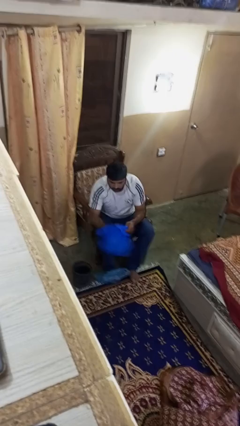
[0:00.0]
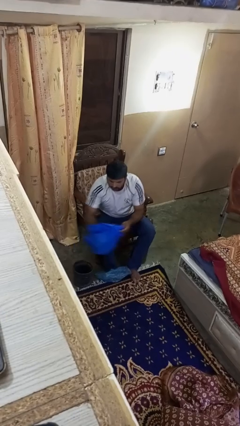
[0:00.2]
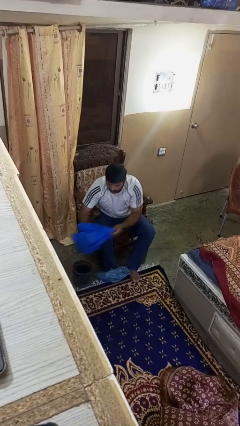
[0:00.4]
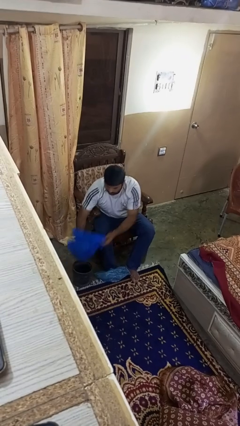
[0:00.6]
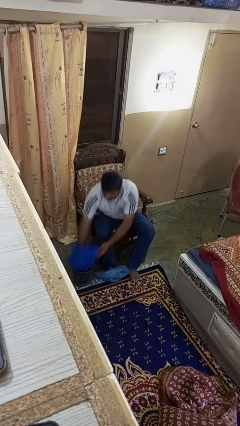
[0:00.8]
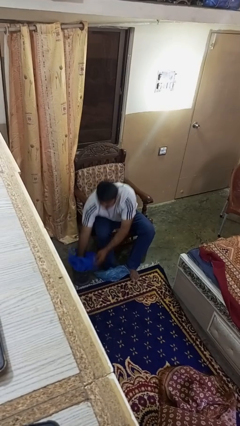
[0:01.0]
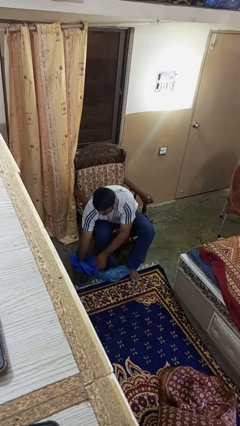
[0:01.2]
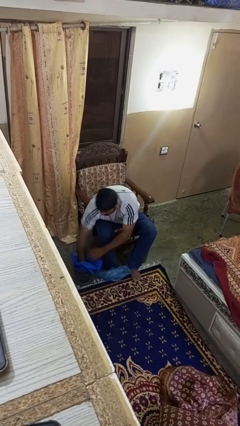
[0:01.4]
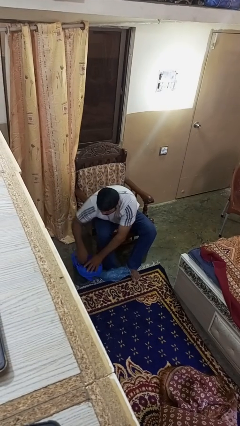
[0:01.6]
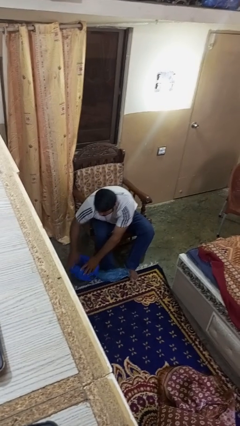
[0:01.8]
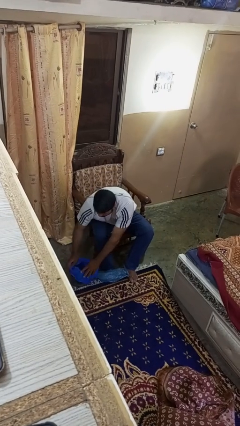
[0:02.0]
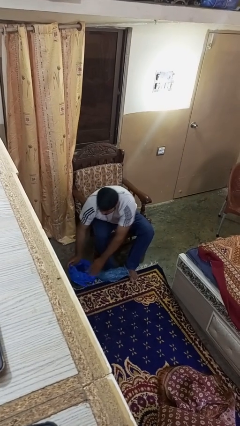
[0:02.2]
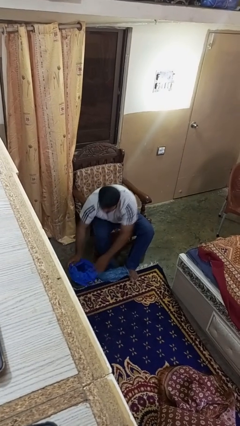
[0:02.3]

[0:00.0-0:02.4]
person inserts trashbag into trashcan

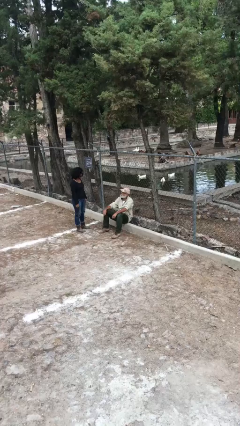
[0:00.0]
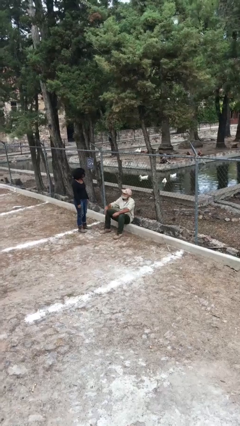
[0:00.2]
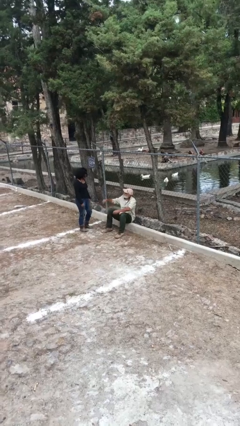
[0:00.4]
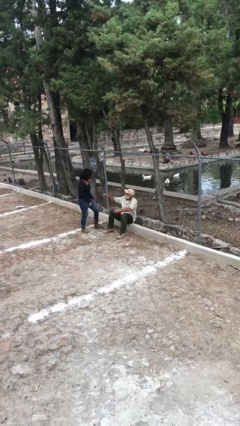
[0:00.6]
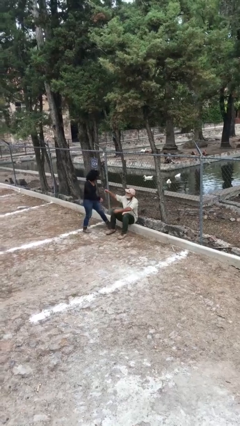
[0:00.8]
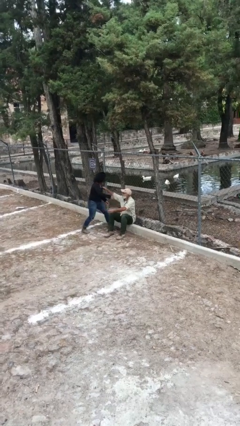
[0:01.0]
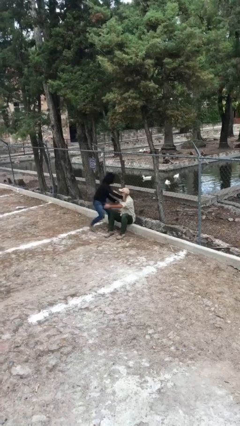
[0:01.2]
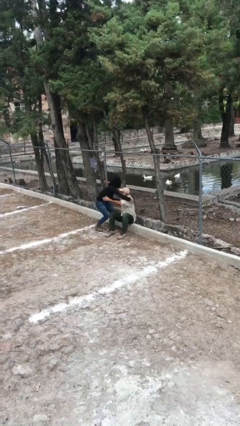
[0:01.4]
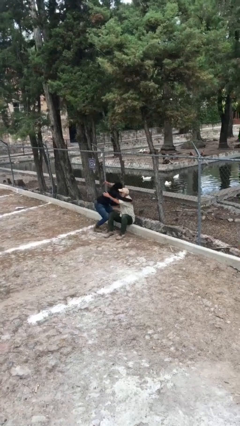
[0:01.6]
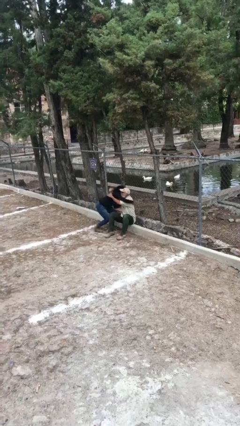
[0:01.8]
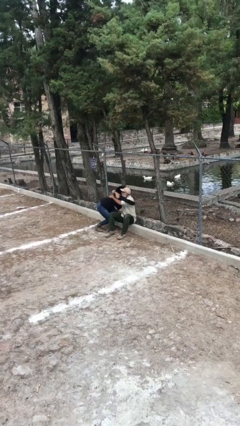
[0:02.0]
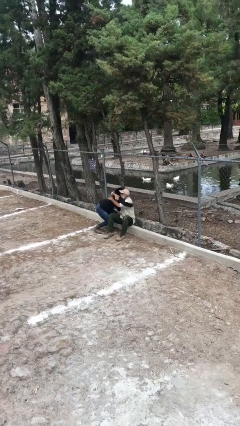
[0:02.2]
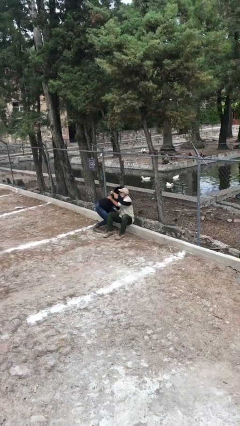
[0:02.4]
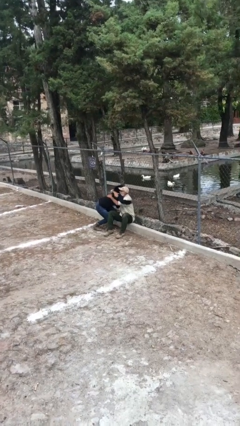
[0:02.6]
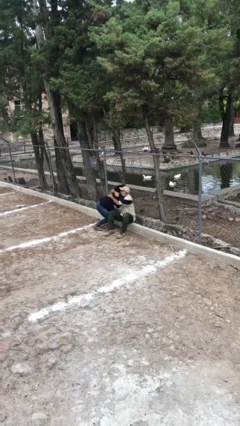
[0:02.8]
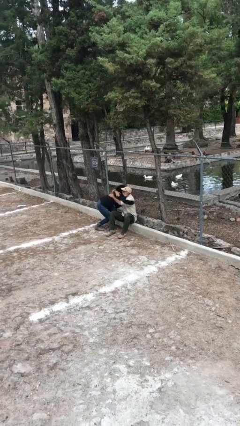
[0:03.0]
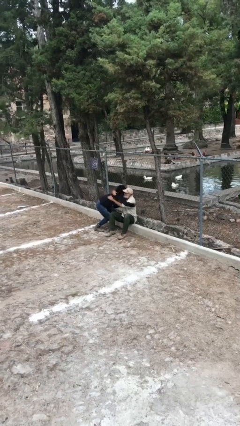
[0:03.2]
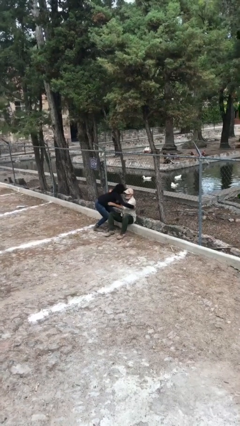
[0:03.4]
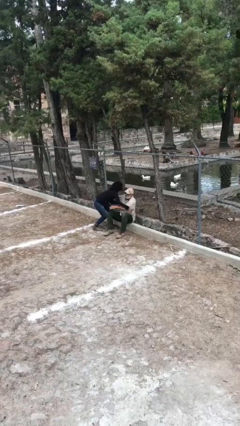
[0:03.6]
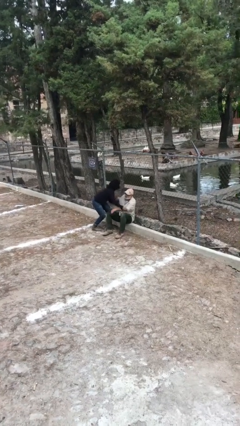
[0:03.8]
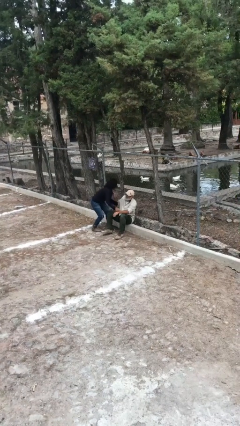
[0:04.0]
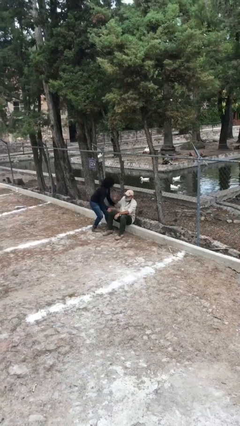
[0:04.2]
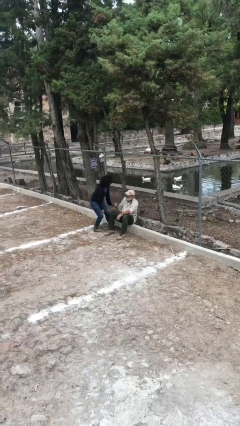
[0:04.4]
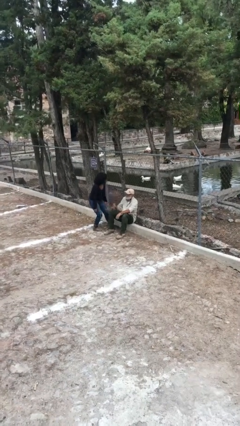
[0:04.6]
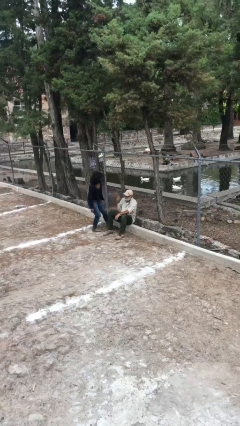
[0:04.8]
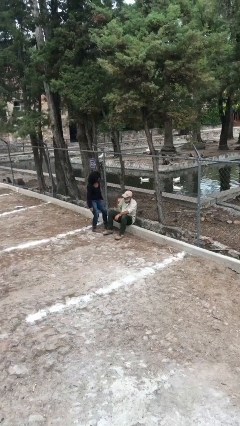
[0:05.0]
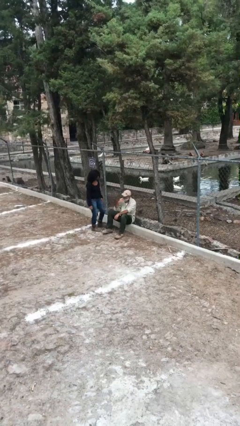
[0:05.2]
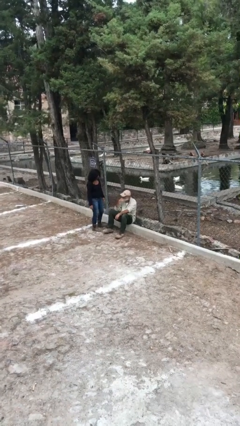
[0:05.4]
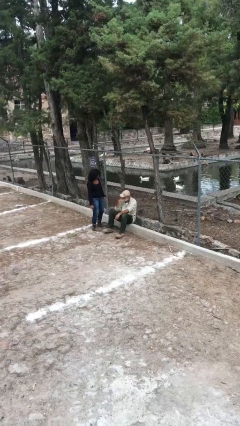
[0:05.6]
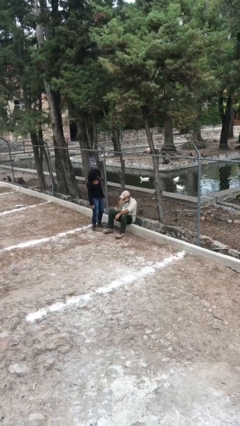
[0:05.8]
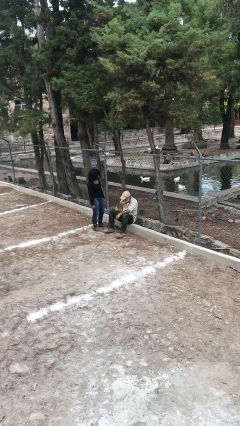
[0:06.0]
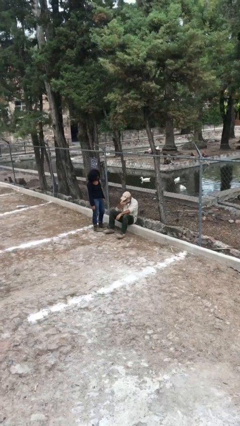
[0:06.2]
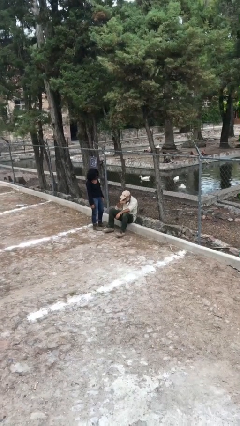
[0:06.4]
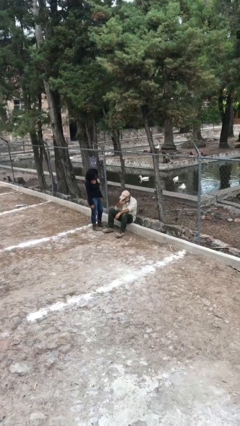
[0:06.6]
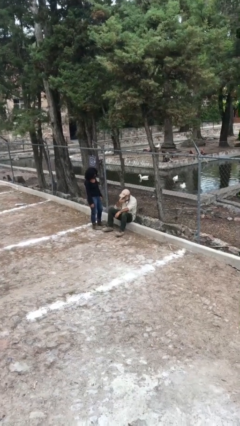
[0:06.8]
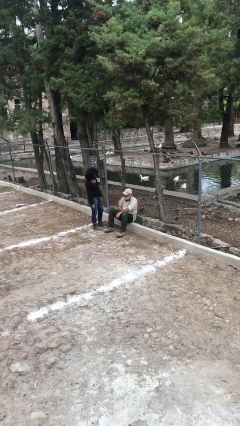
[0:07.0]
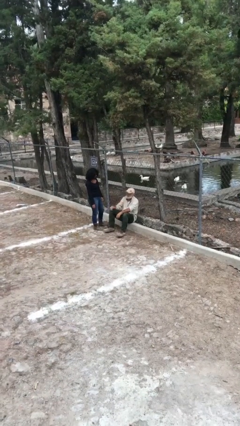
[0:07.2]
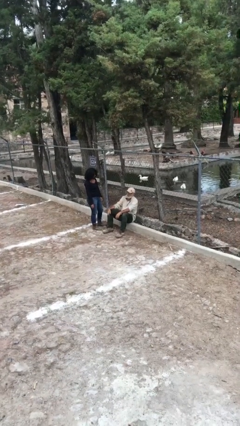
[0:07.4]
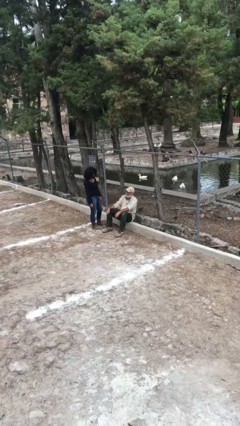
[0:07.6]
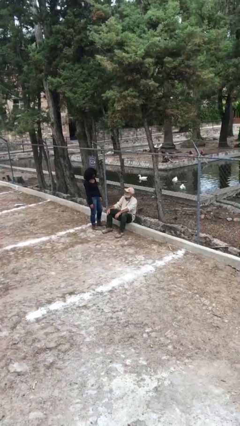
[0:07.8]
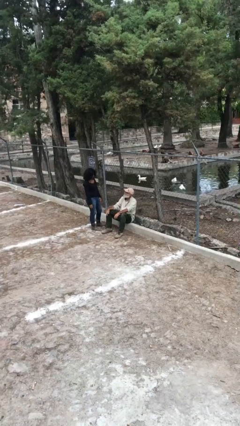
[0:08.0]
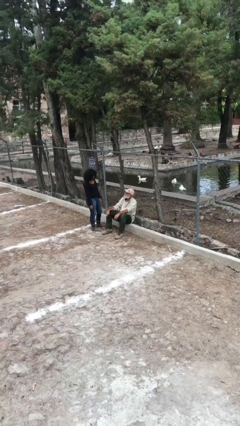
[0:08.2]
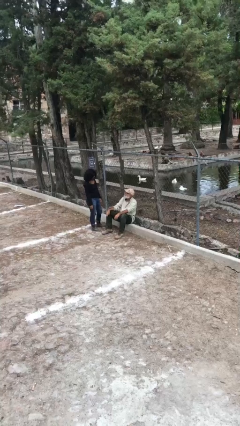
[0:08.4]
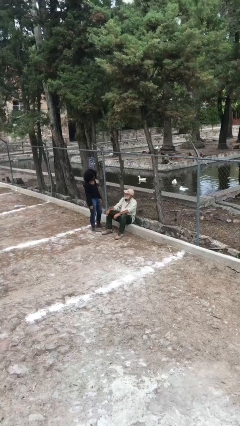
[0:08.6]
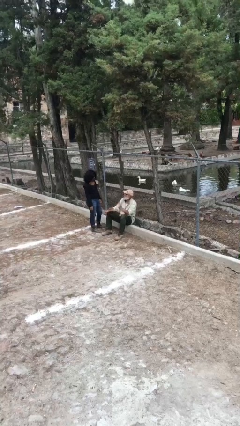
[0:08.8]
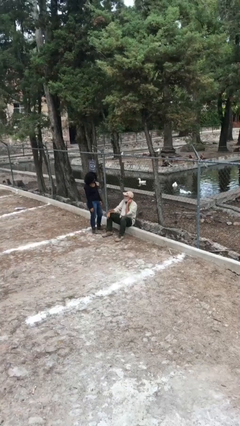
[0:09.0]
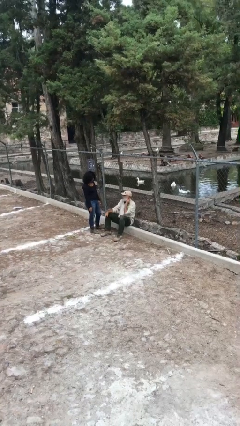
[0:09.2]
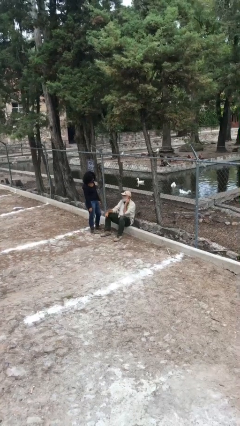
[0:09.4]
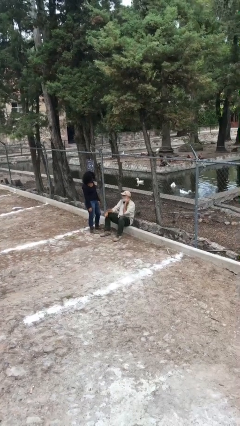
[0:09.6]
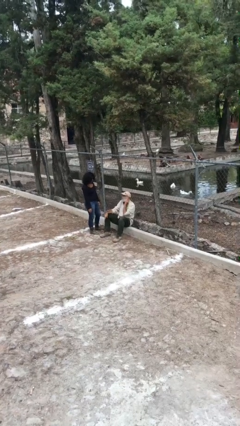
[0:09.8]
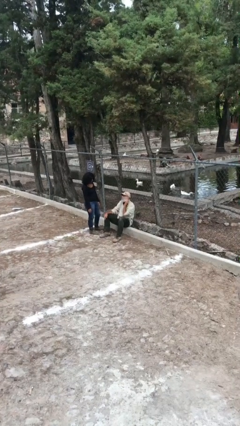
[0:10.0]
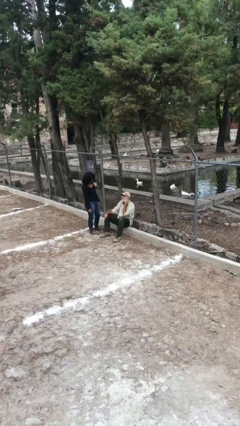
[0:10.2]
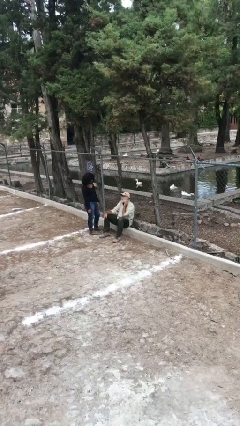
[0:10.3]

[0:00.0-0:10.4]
person embraces person

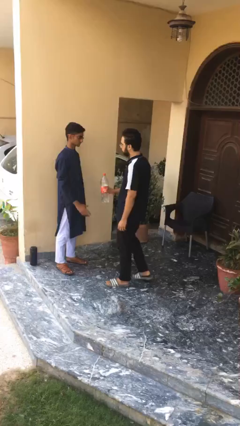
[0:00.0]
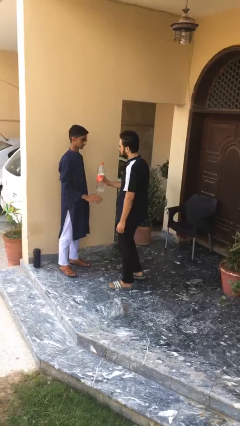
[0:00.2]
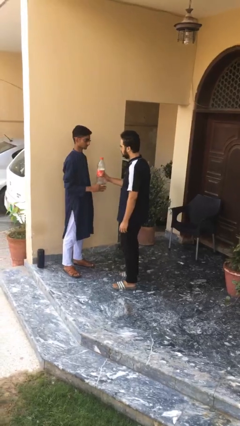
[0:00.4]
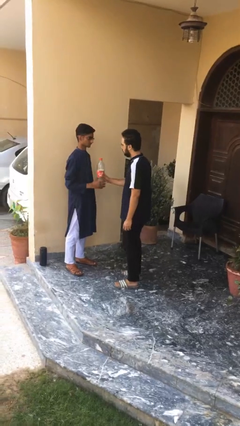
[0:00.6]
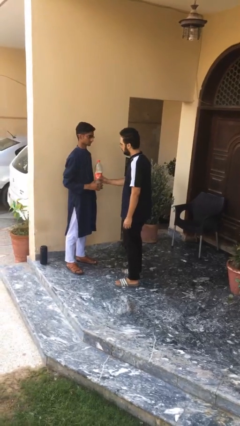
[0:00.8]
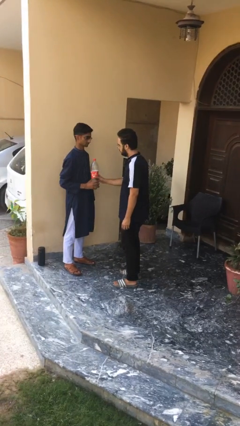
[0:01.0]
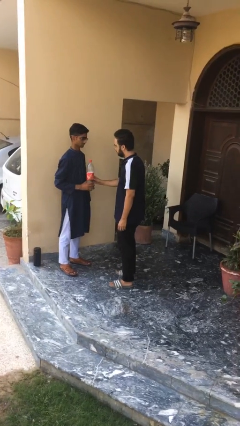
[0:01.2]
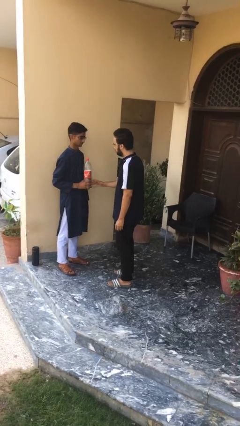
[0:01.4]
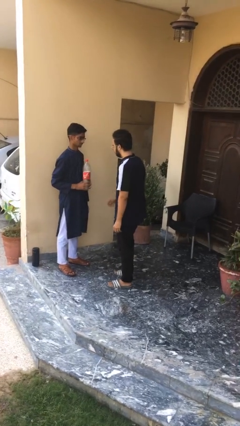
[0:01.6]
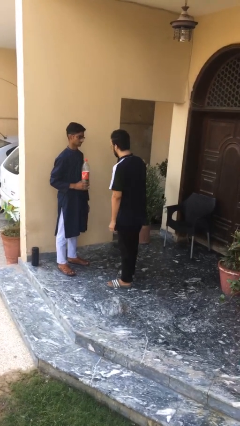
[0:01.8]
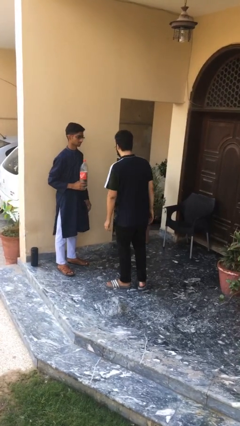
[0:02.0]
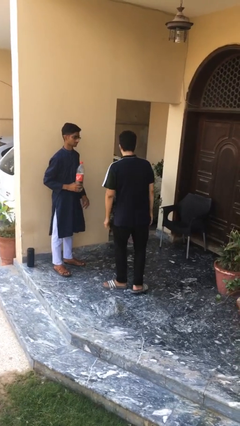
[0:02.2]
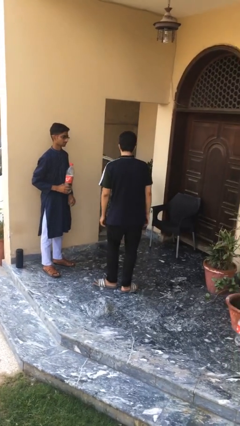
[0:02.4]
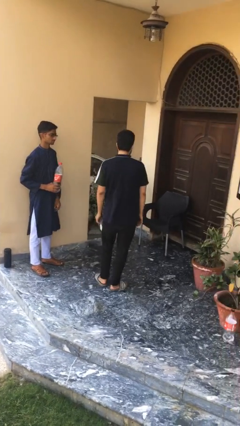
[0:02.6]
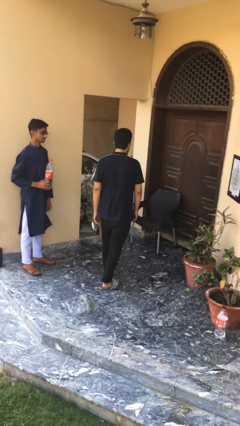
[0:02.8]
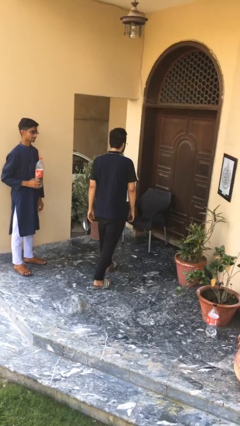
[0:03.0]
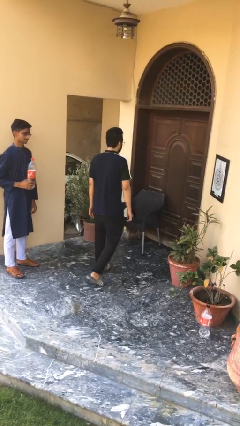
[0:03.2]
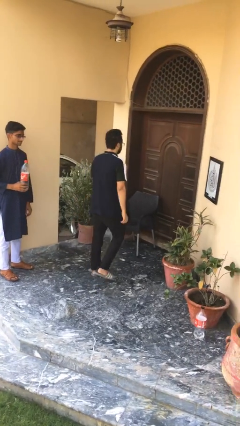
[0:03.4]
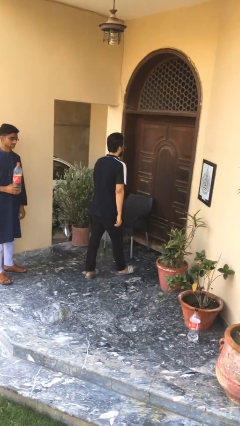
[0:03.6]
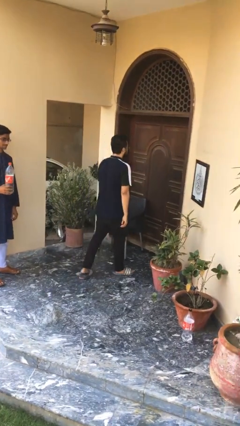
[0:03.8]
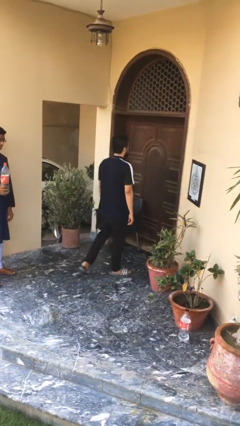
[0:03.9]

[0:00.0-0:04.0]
person transfers object to person

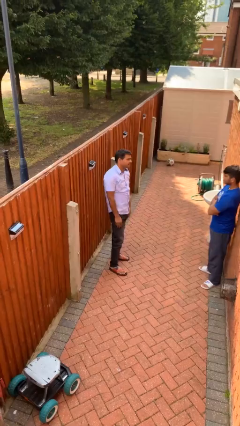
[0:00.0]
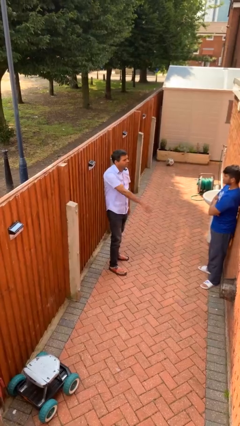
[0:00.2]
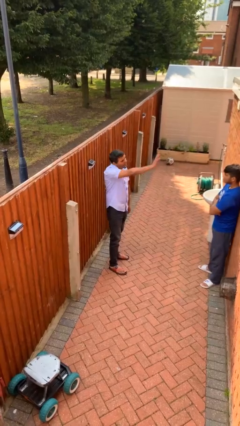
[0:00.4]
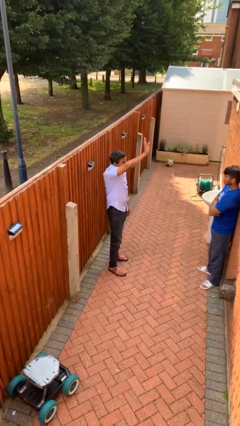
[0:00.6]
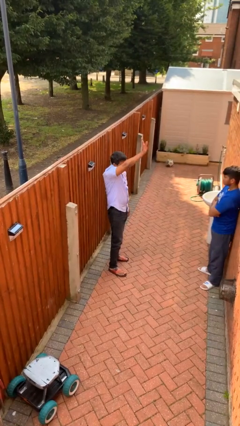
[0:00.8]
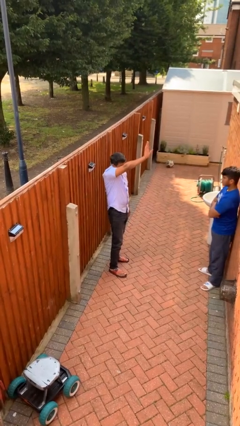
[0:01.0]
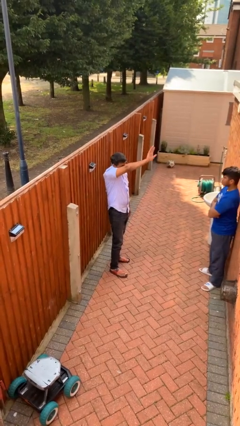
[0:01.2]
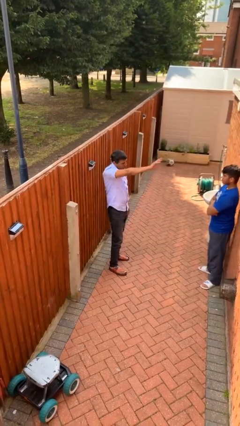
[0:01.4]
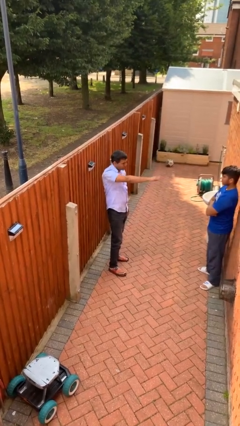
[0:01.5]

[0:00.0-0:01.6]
person waves at person
